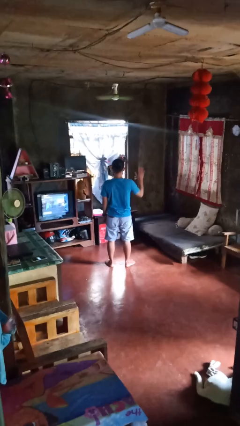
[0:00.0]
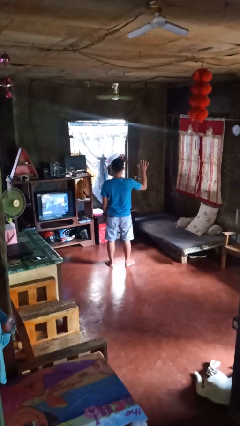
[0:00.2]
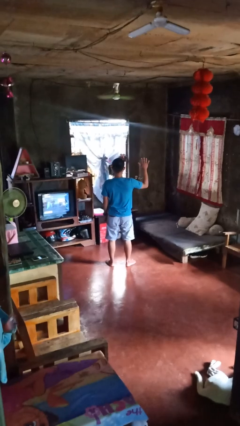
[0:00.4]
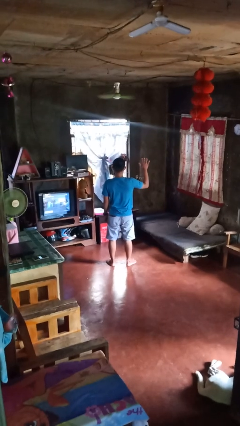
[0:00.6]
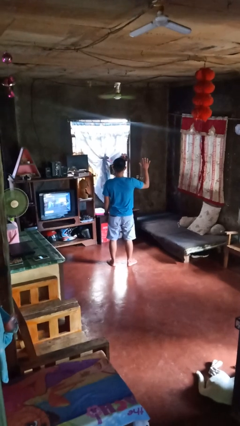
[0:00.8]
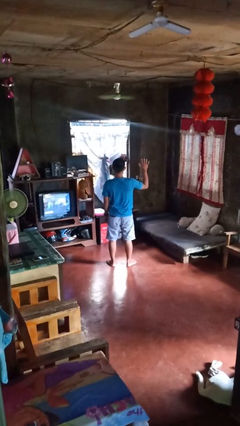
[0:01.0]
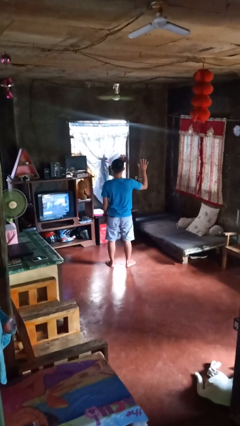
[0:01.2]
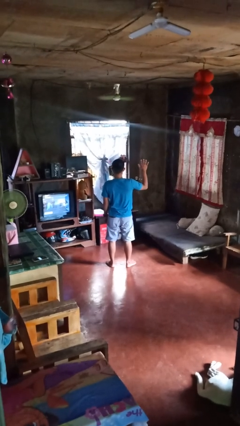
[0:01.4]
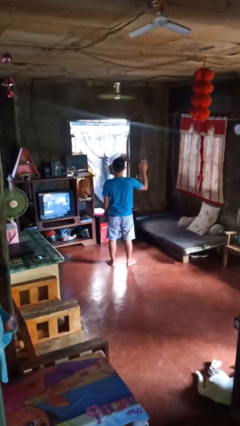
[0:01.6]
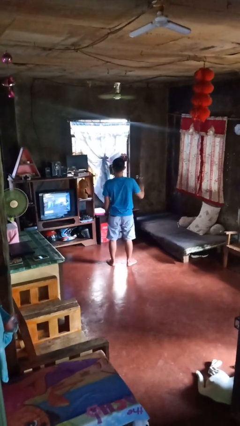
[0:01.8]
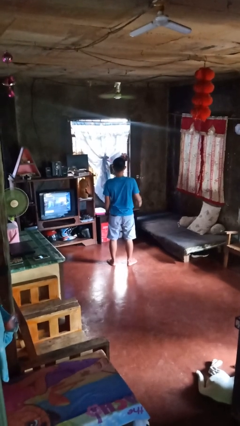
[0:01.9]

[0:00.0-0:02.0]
person gestures number five

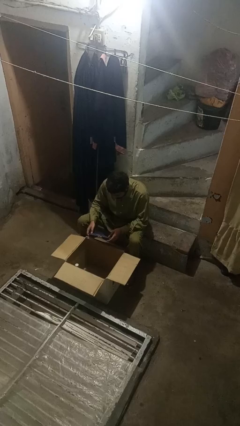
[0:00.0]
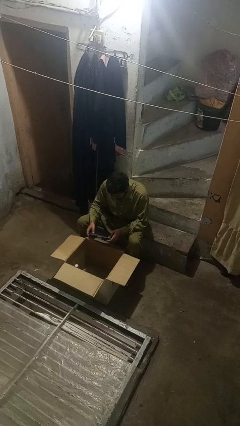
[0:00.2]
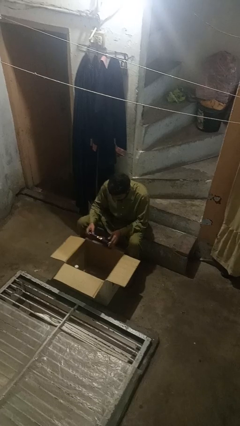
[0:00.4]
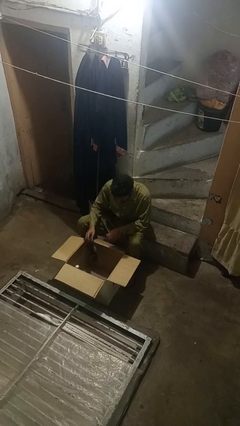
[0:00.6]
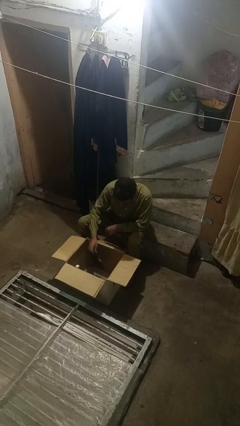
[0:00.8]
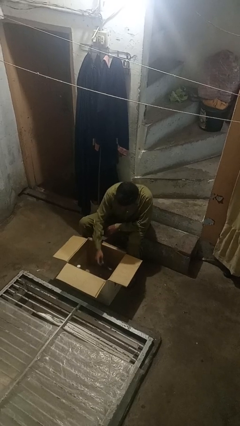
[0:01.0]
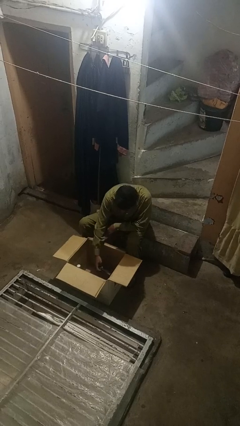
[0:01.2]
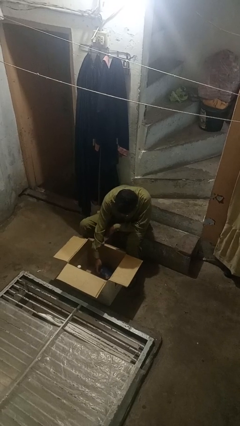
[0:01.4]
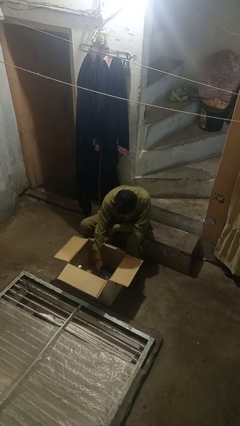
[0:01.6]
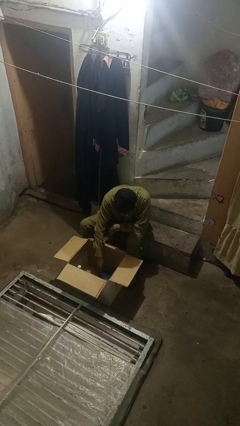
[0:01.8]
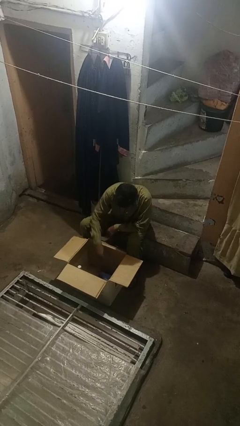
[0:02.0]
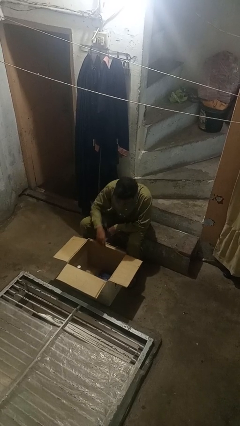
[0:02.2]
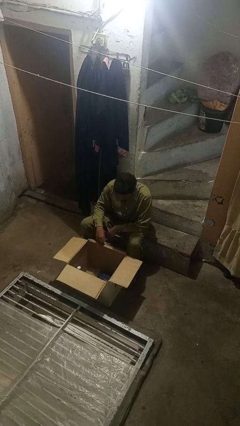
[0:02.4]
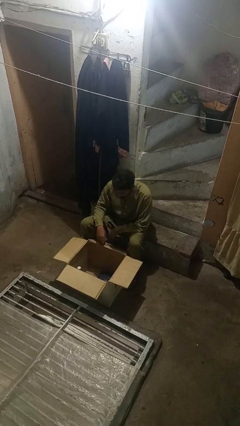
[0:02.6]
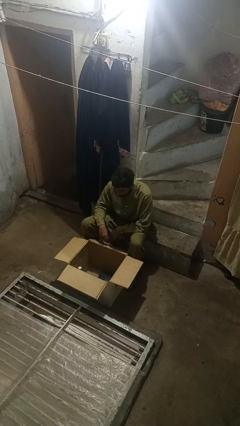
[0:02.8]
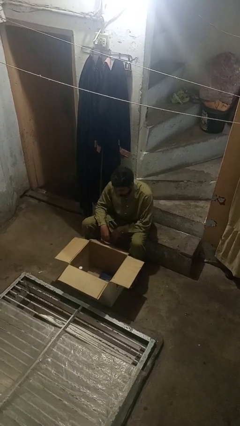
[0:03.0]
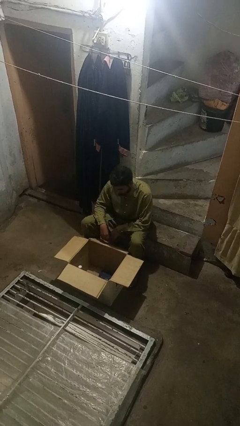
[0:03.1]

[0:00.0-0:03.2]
person puts object into box

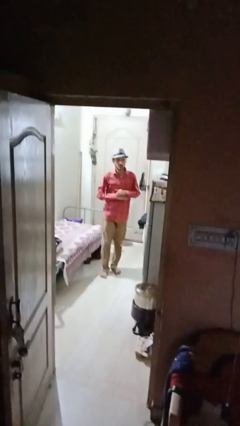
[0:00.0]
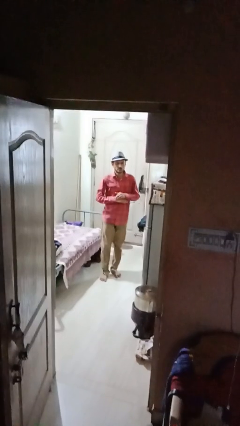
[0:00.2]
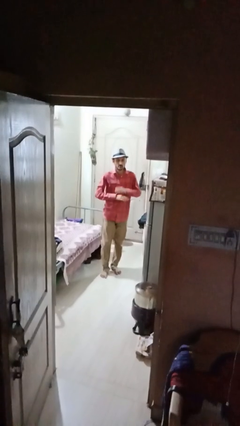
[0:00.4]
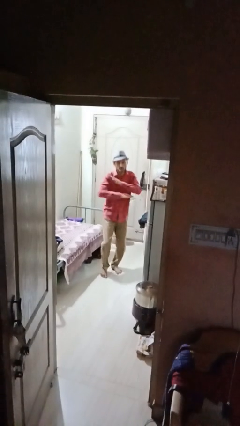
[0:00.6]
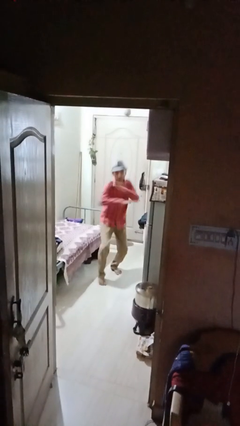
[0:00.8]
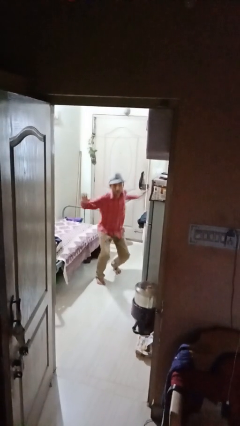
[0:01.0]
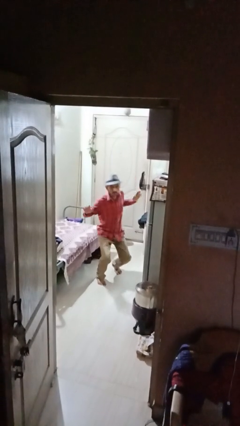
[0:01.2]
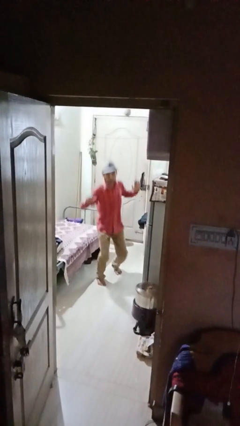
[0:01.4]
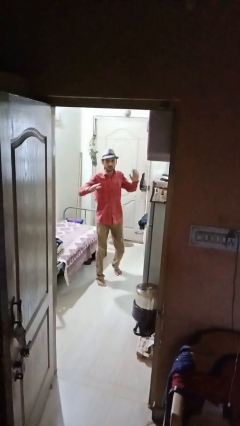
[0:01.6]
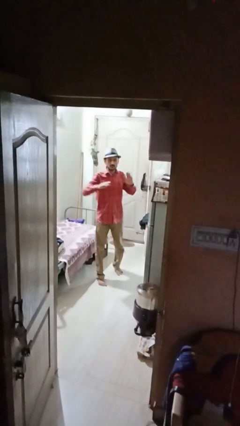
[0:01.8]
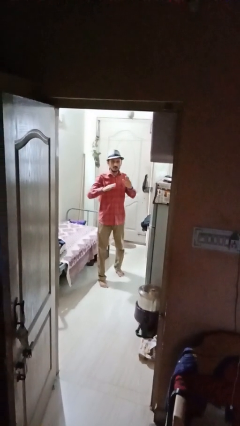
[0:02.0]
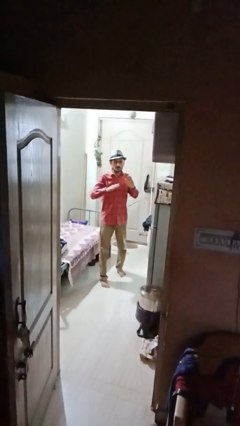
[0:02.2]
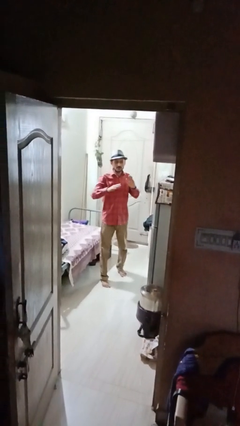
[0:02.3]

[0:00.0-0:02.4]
person karate chop

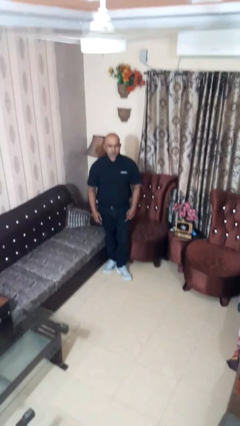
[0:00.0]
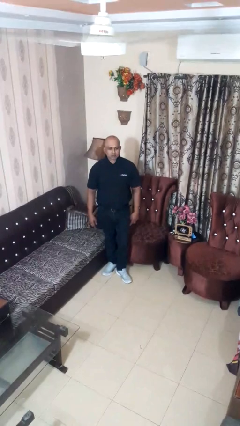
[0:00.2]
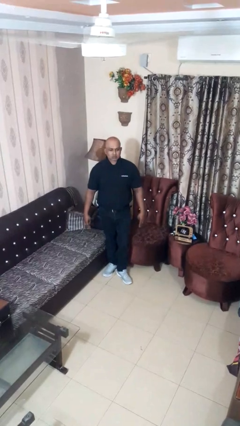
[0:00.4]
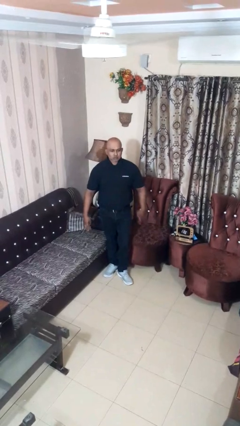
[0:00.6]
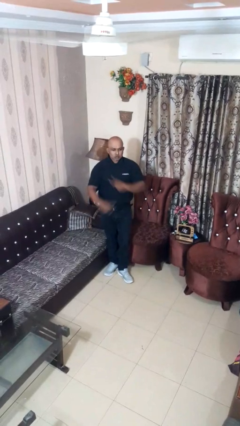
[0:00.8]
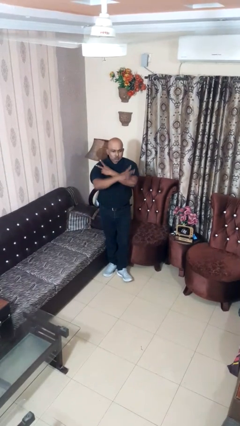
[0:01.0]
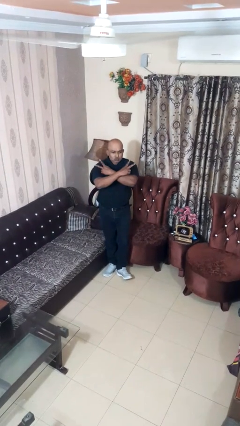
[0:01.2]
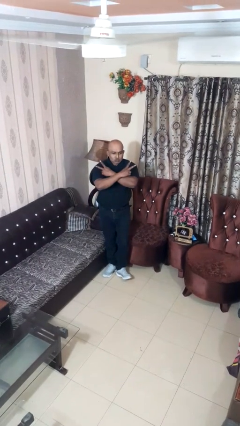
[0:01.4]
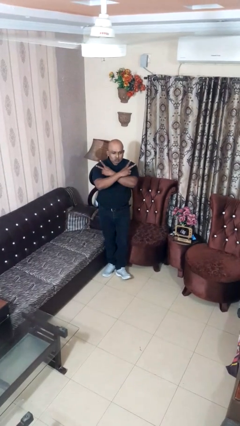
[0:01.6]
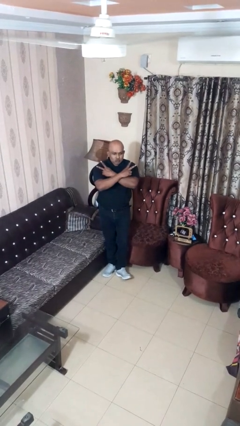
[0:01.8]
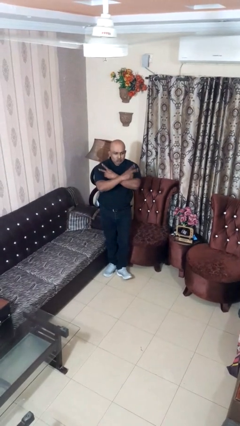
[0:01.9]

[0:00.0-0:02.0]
person gestures arms x

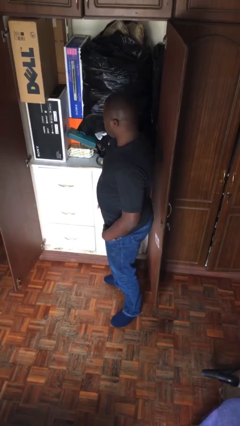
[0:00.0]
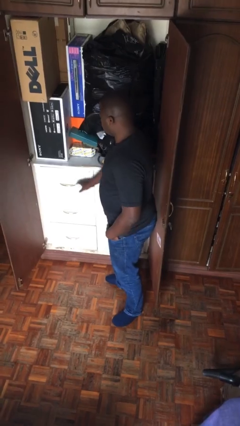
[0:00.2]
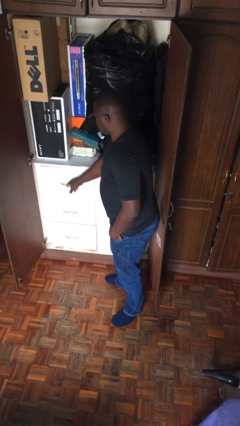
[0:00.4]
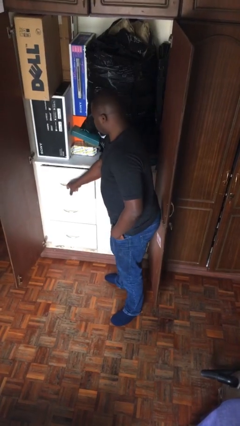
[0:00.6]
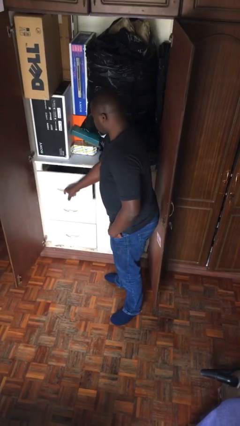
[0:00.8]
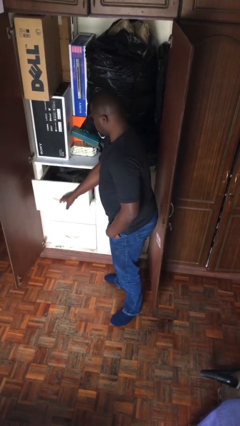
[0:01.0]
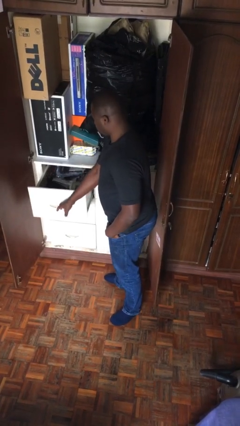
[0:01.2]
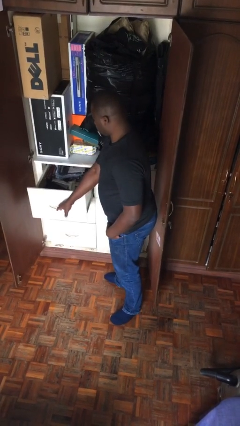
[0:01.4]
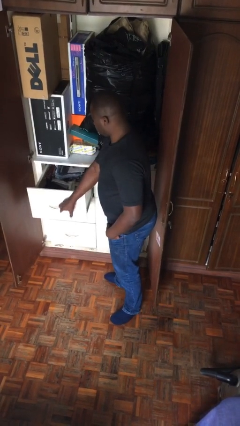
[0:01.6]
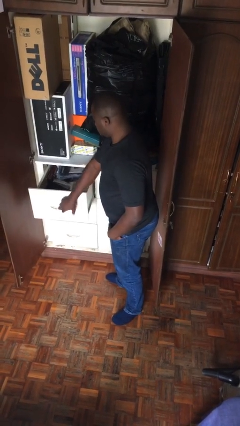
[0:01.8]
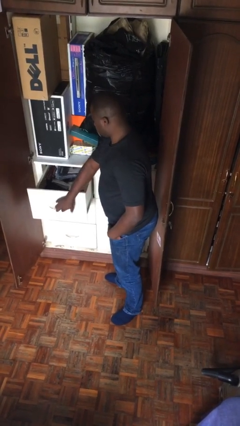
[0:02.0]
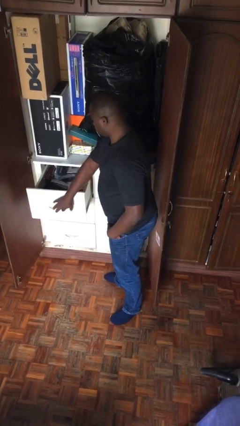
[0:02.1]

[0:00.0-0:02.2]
person opens dresser drawer

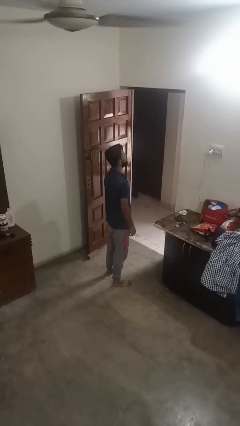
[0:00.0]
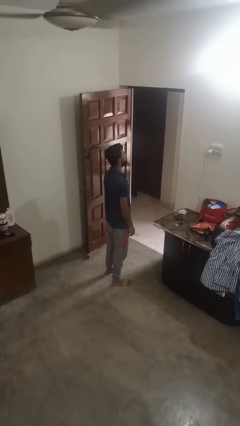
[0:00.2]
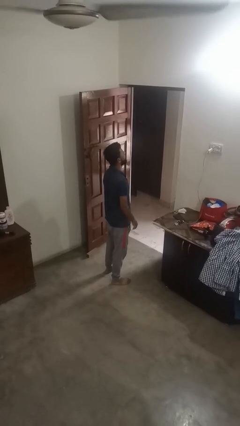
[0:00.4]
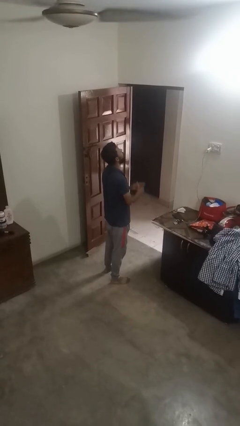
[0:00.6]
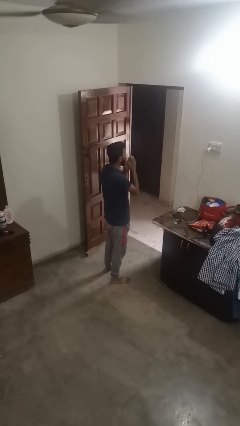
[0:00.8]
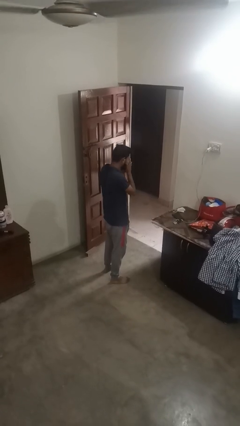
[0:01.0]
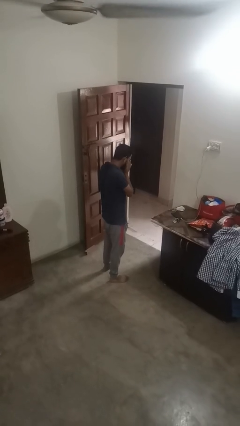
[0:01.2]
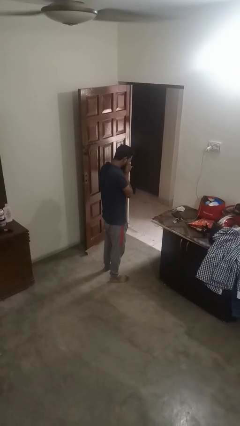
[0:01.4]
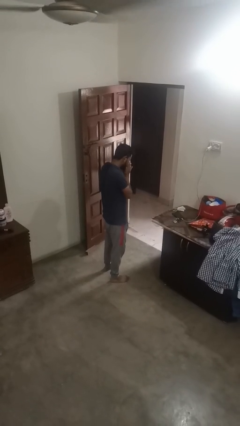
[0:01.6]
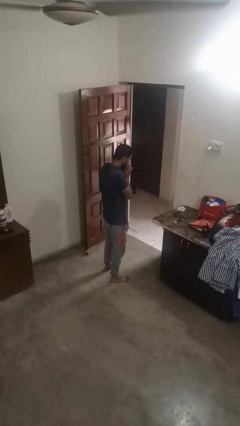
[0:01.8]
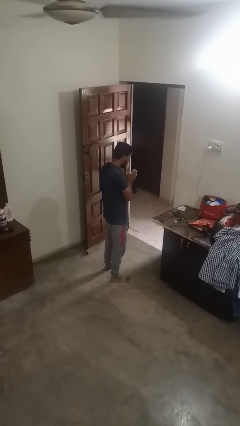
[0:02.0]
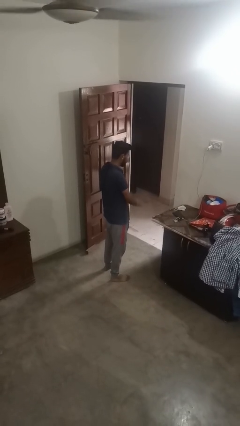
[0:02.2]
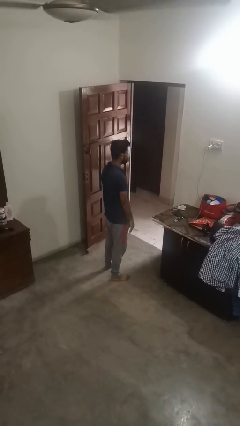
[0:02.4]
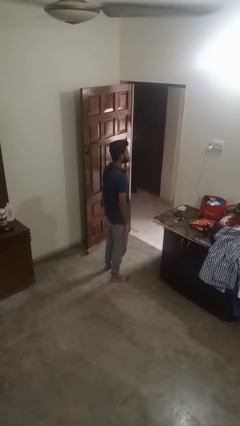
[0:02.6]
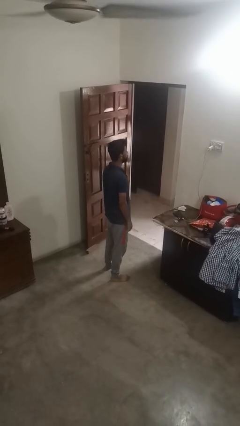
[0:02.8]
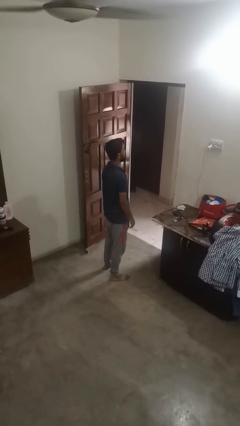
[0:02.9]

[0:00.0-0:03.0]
person sneezes into hand

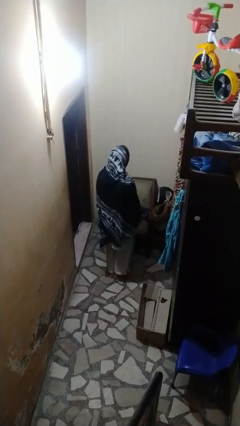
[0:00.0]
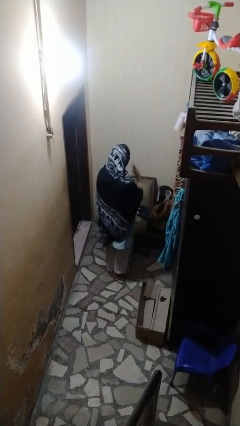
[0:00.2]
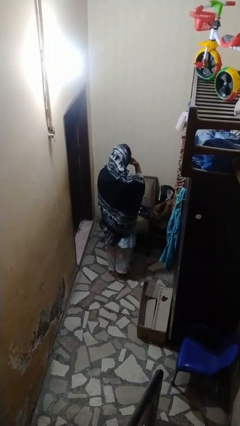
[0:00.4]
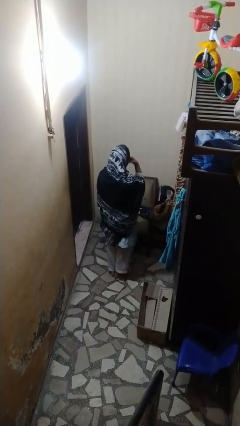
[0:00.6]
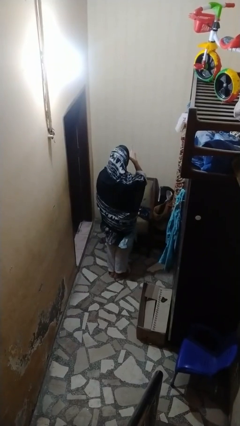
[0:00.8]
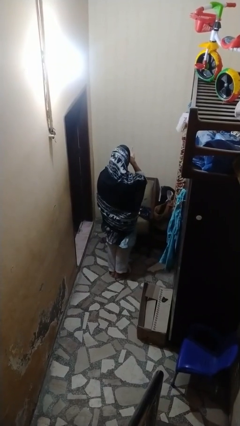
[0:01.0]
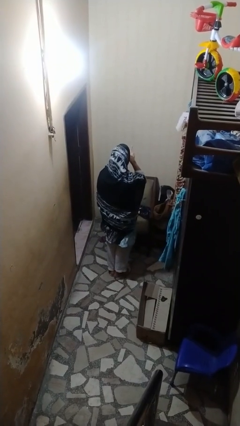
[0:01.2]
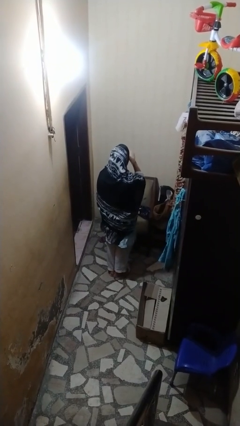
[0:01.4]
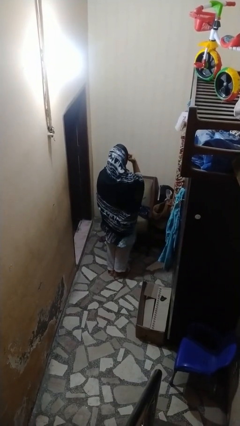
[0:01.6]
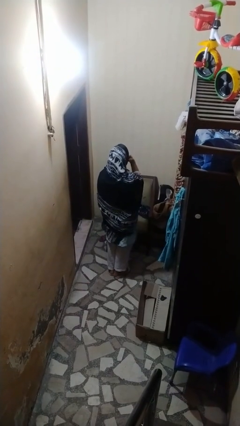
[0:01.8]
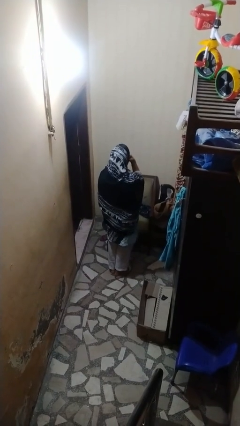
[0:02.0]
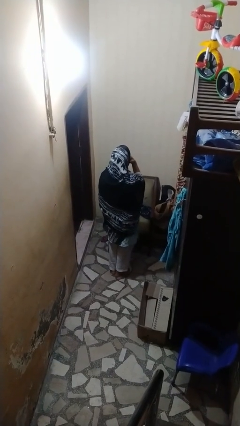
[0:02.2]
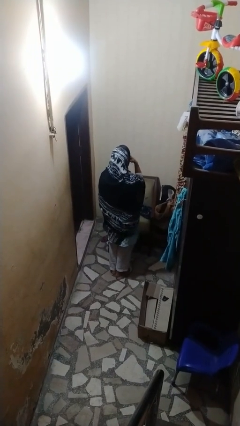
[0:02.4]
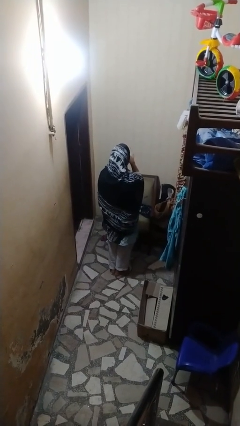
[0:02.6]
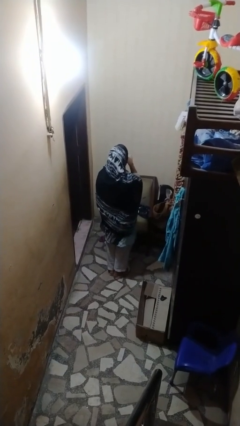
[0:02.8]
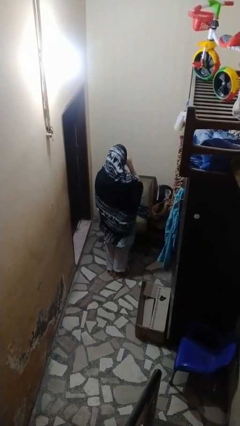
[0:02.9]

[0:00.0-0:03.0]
person gestures watch closely
